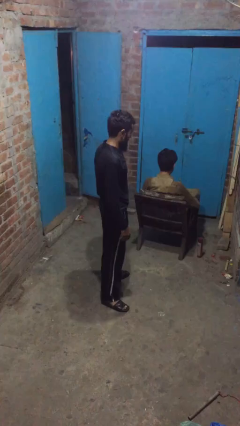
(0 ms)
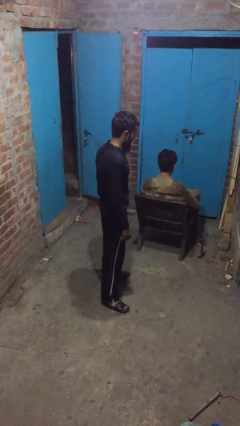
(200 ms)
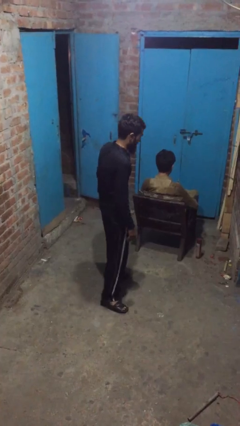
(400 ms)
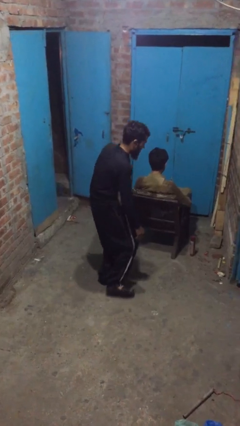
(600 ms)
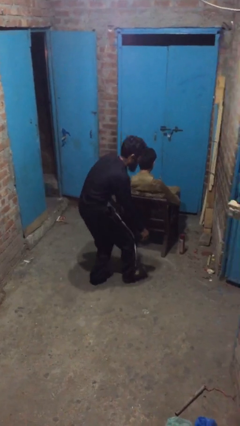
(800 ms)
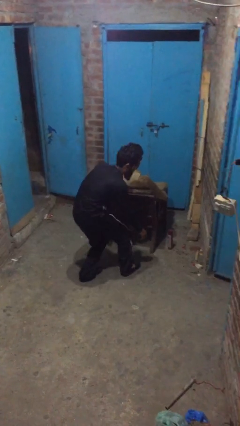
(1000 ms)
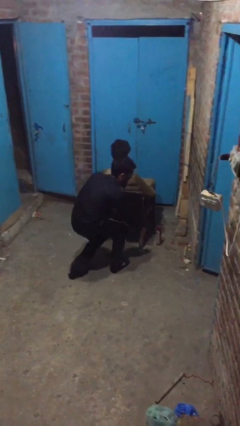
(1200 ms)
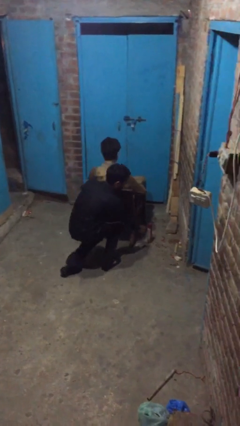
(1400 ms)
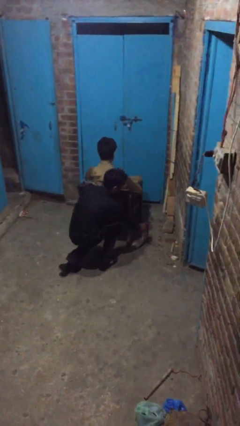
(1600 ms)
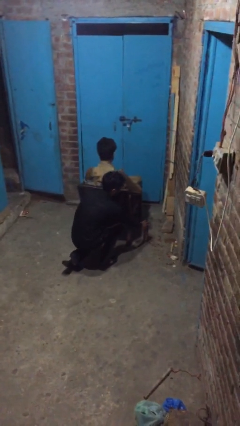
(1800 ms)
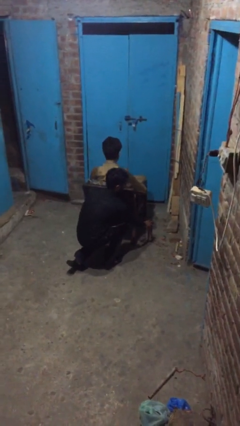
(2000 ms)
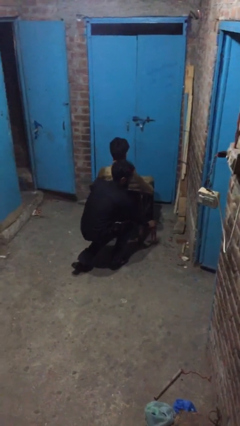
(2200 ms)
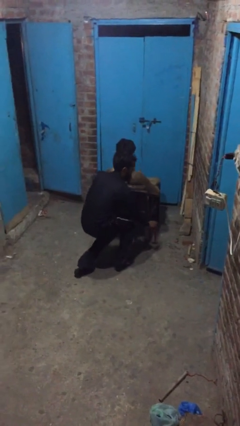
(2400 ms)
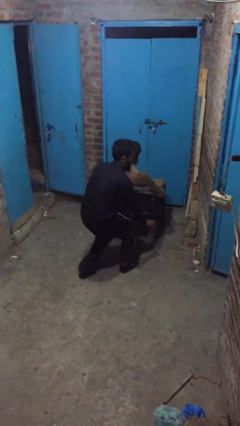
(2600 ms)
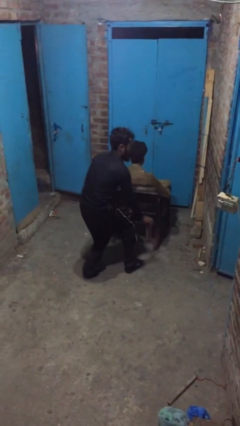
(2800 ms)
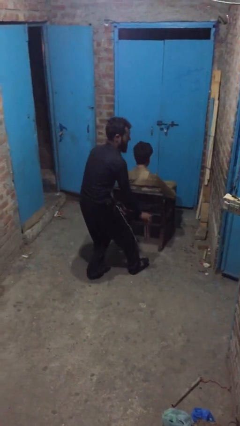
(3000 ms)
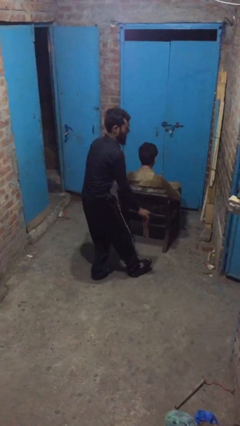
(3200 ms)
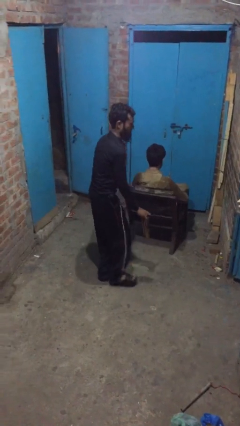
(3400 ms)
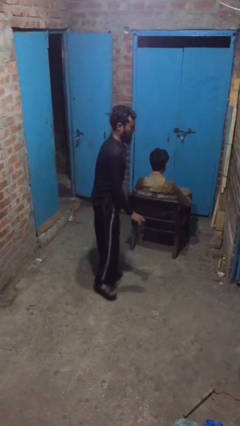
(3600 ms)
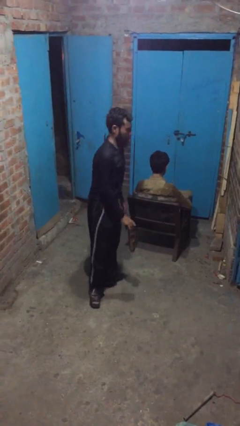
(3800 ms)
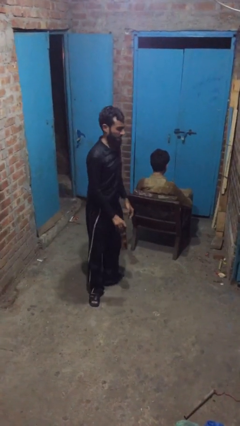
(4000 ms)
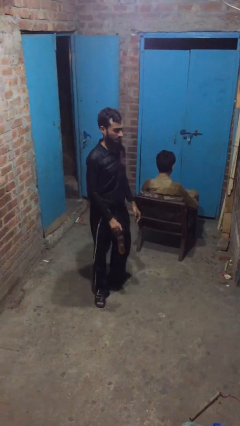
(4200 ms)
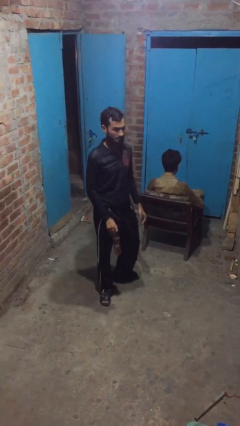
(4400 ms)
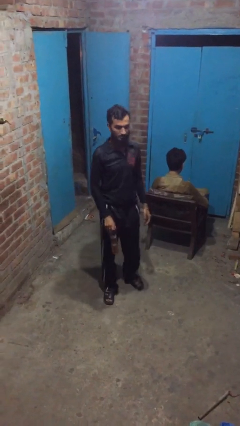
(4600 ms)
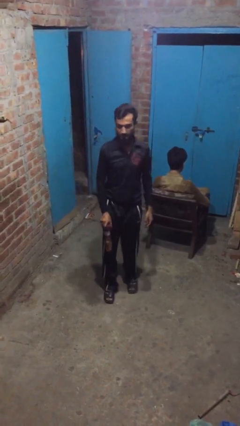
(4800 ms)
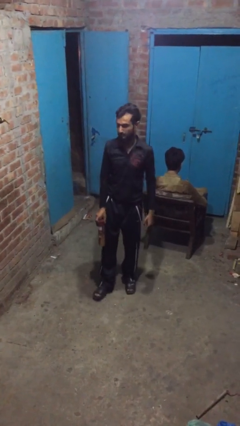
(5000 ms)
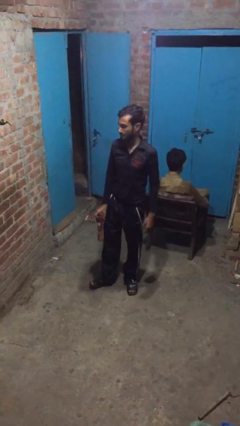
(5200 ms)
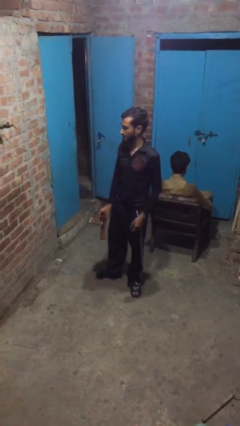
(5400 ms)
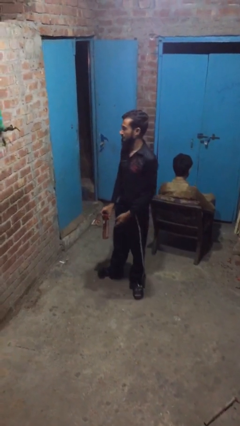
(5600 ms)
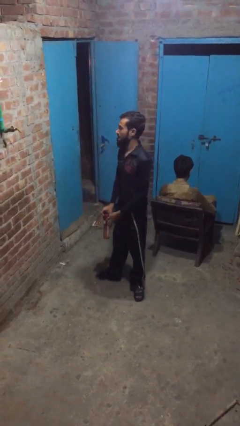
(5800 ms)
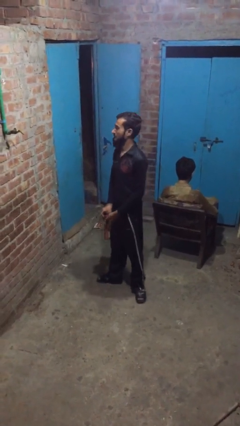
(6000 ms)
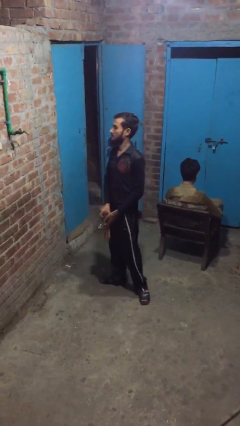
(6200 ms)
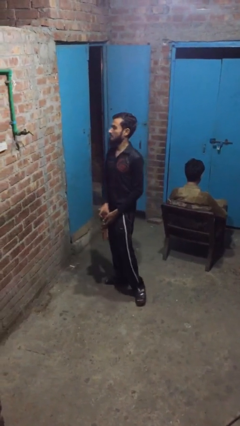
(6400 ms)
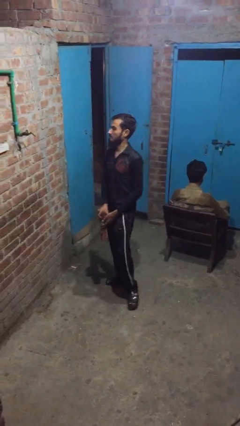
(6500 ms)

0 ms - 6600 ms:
person steals object from person

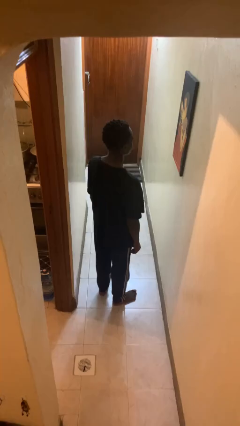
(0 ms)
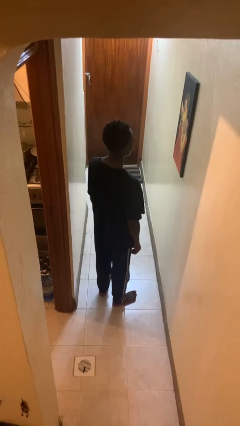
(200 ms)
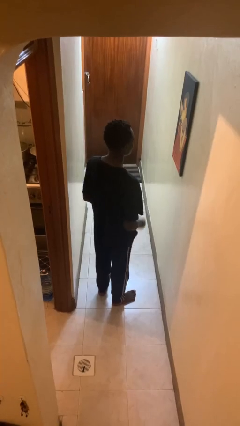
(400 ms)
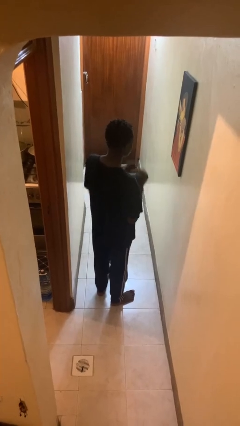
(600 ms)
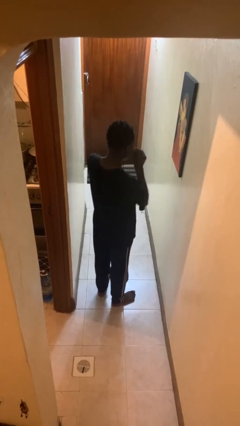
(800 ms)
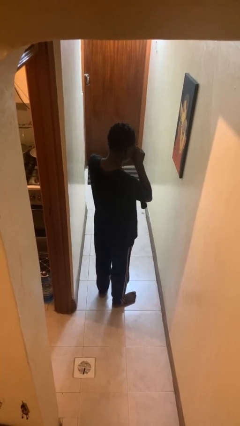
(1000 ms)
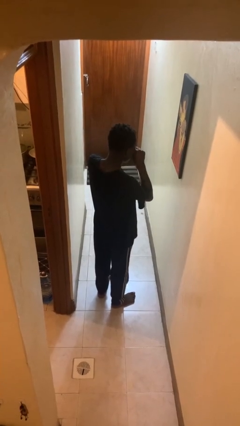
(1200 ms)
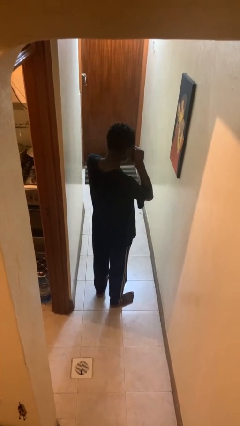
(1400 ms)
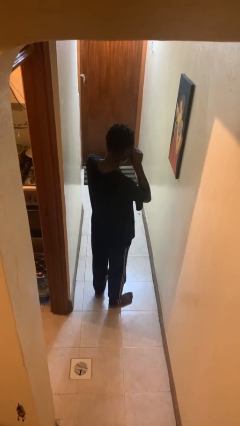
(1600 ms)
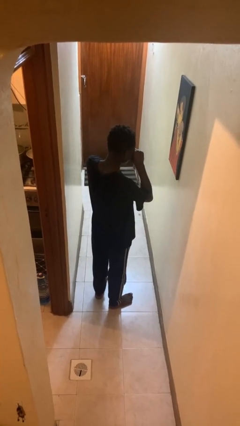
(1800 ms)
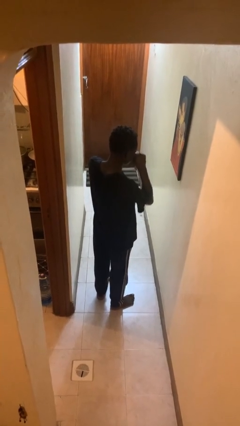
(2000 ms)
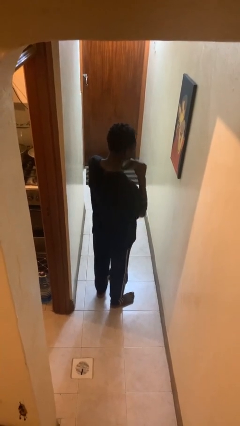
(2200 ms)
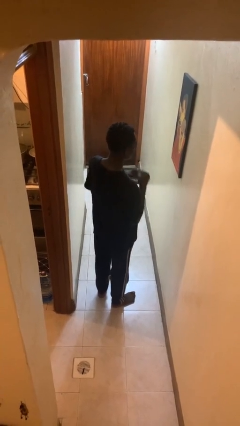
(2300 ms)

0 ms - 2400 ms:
person rubs eyes

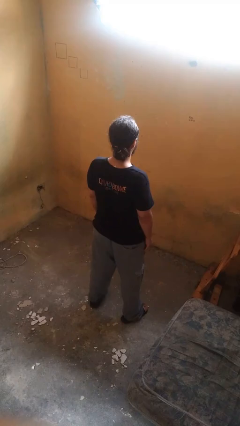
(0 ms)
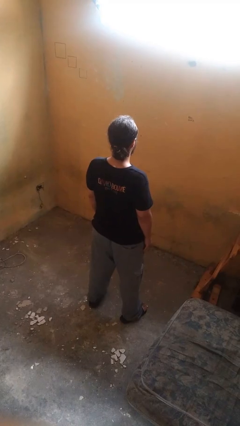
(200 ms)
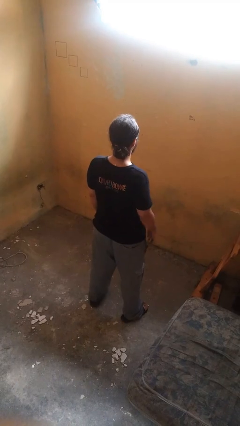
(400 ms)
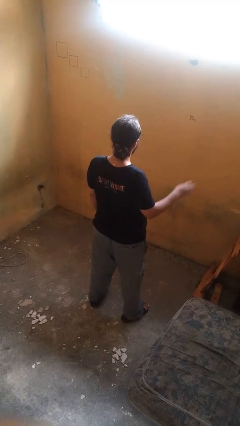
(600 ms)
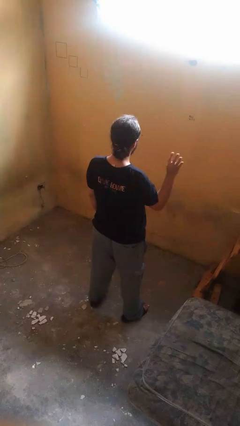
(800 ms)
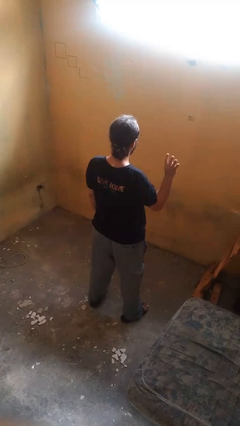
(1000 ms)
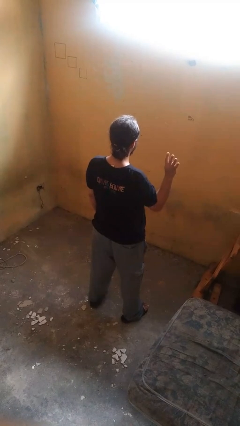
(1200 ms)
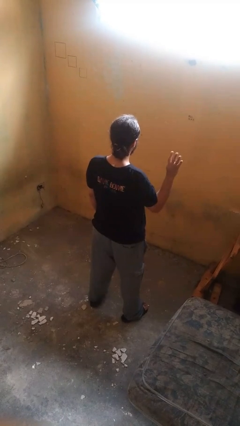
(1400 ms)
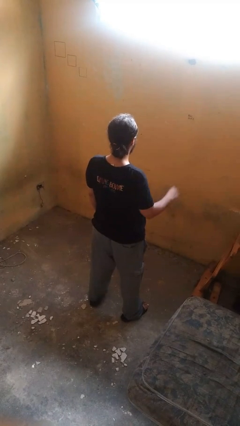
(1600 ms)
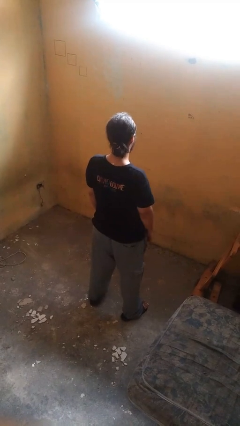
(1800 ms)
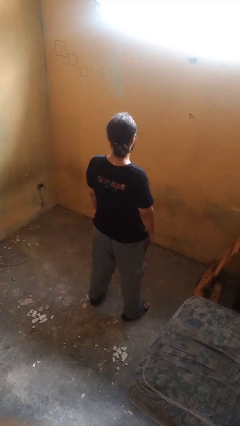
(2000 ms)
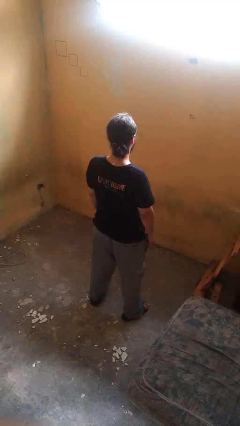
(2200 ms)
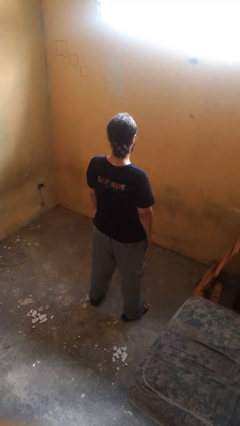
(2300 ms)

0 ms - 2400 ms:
person gestures number four

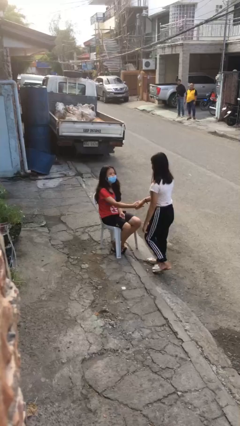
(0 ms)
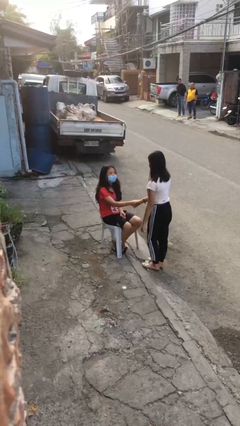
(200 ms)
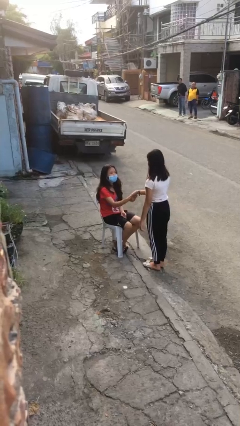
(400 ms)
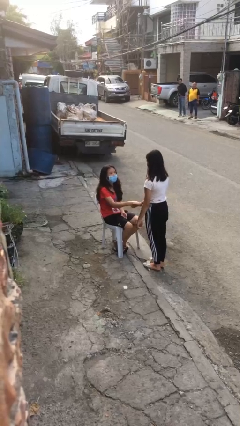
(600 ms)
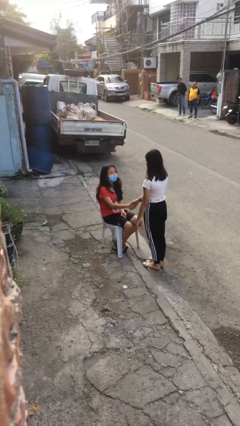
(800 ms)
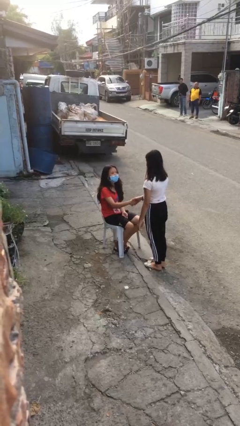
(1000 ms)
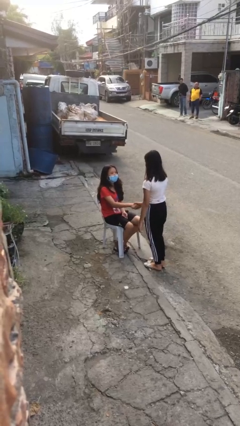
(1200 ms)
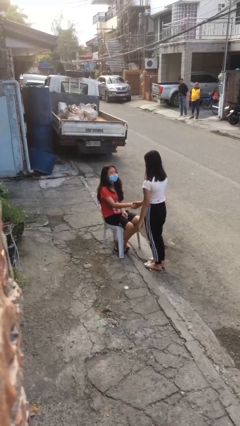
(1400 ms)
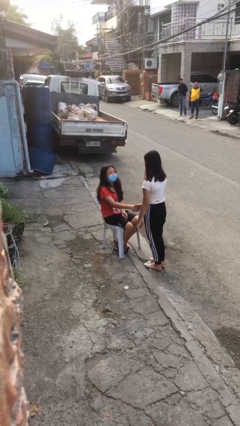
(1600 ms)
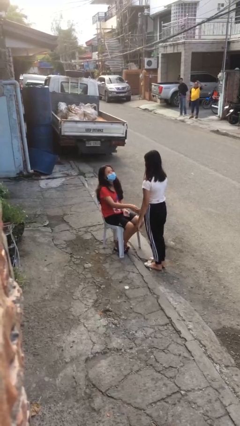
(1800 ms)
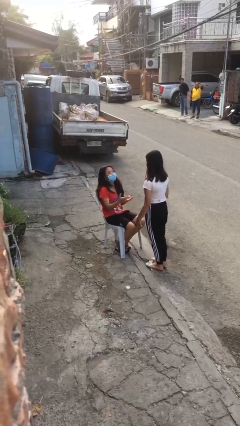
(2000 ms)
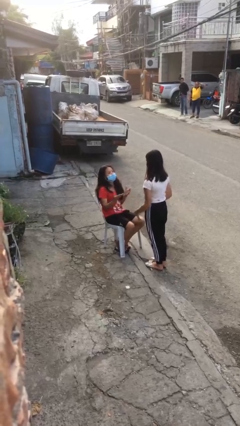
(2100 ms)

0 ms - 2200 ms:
person shakes hand

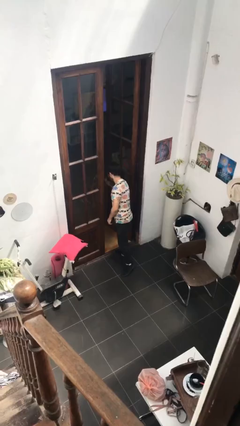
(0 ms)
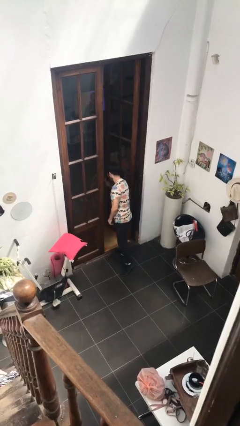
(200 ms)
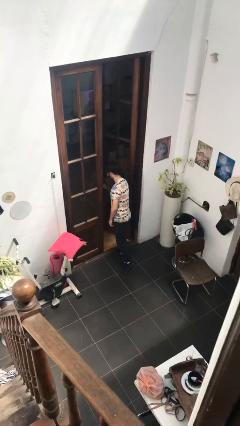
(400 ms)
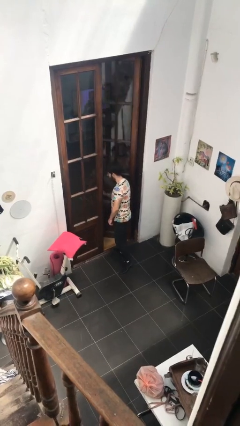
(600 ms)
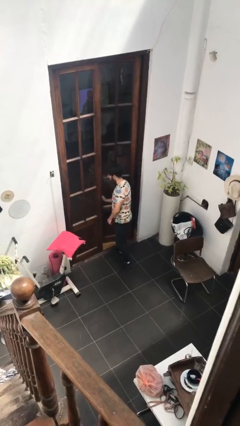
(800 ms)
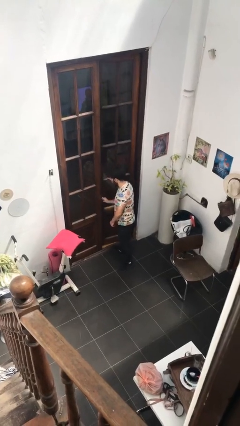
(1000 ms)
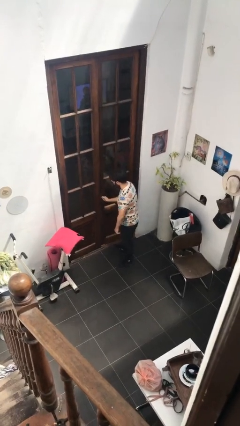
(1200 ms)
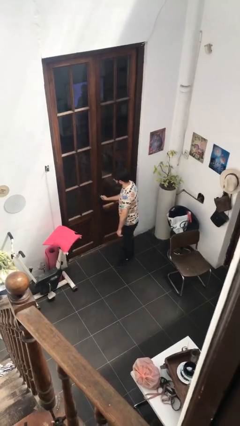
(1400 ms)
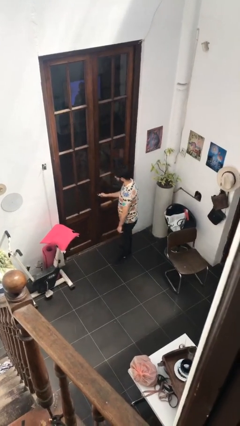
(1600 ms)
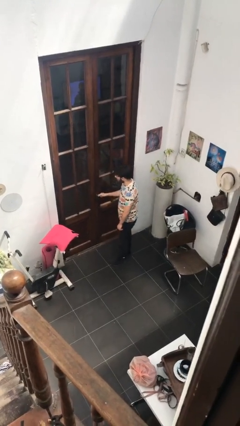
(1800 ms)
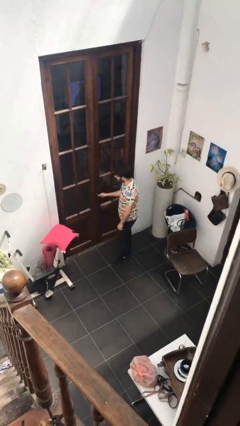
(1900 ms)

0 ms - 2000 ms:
person closes facility door

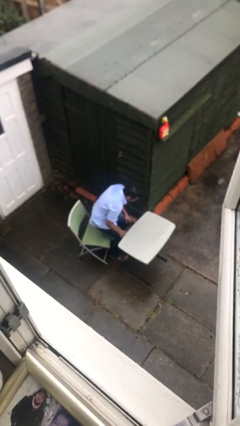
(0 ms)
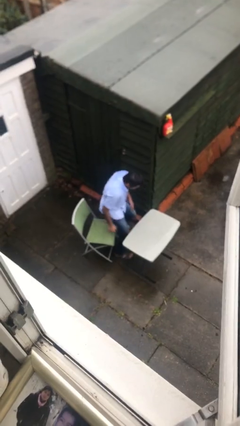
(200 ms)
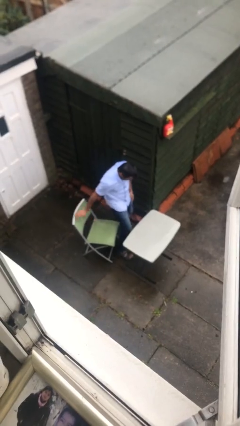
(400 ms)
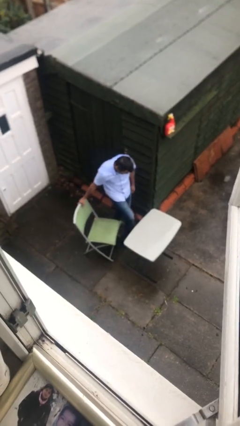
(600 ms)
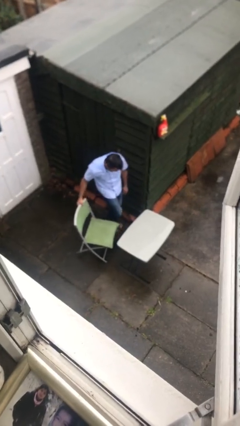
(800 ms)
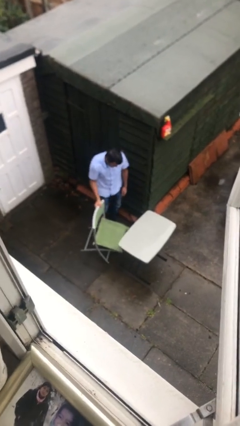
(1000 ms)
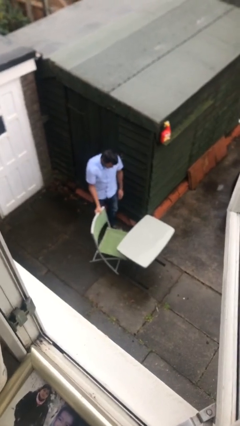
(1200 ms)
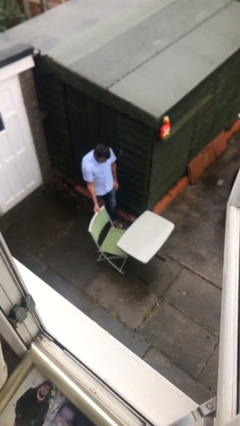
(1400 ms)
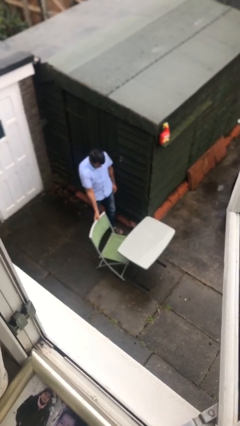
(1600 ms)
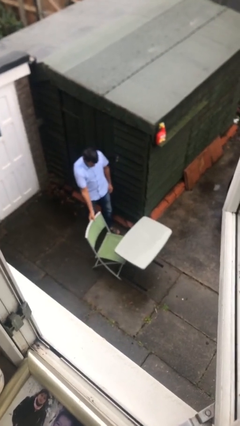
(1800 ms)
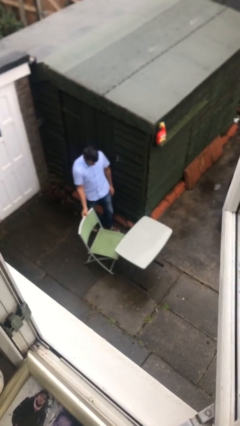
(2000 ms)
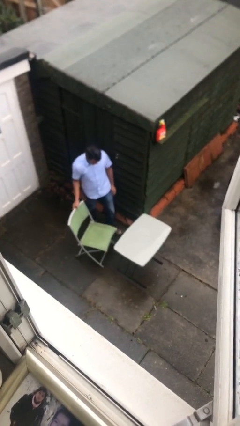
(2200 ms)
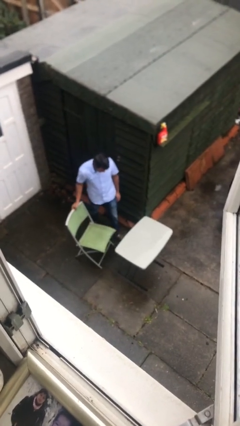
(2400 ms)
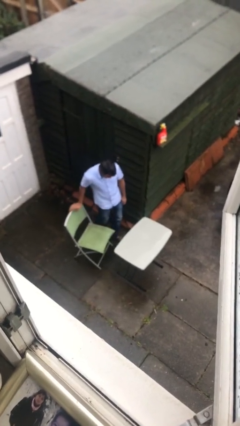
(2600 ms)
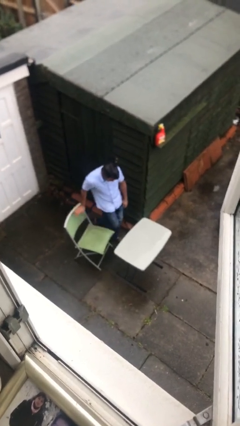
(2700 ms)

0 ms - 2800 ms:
person stands up
